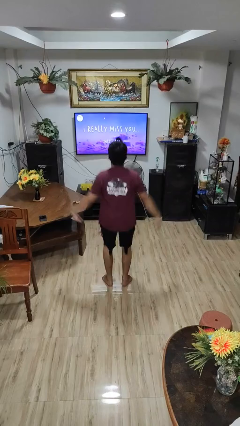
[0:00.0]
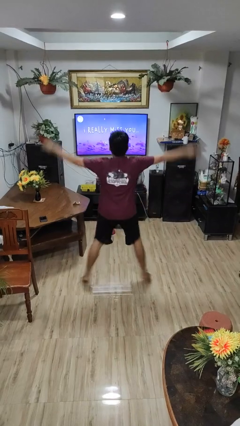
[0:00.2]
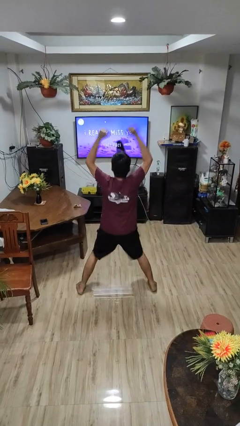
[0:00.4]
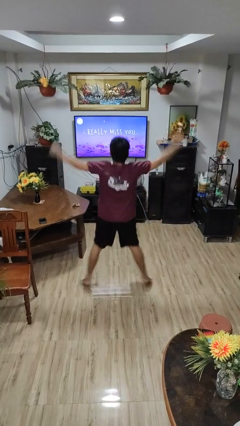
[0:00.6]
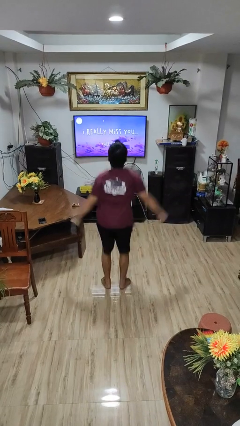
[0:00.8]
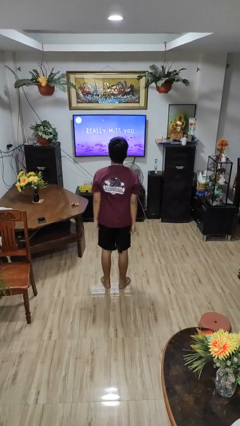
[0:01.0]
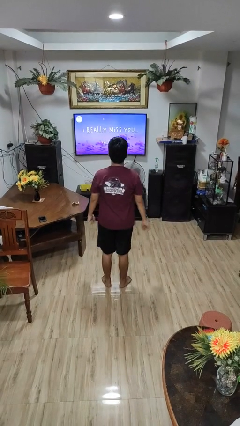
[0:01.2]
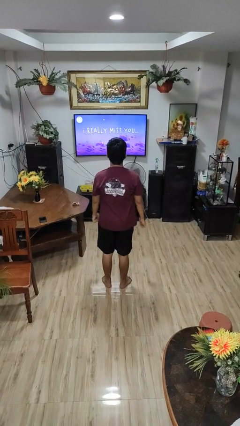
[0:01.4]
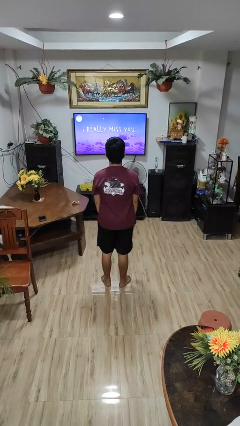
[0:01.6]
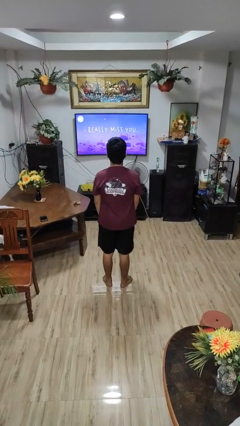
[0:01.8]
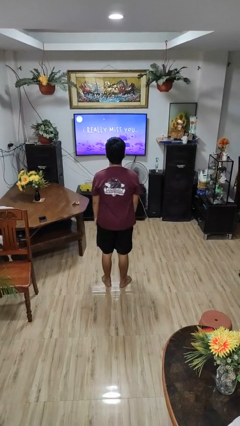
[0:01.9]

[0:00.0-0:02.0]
person exercises with jumping jacks

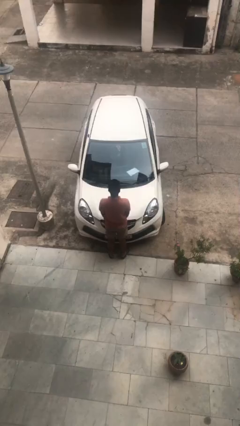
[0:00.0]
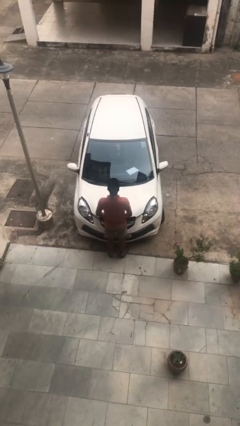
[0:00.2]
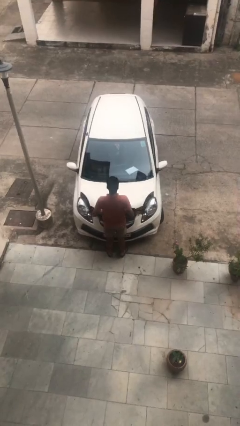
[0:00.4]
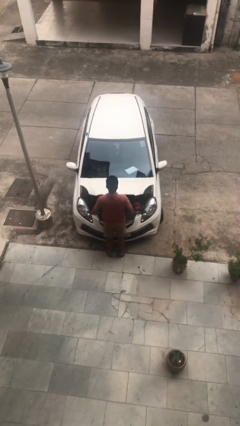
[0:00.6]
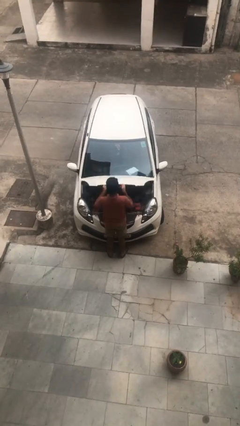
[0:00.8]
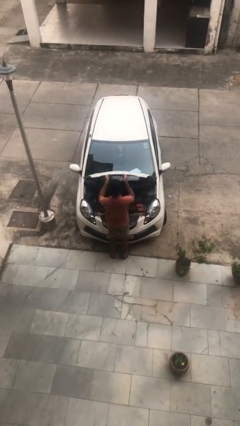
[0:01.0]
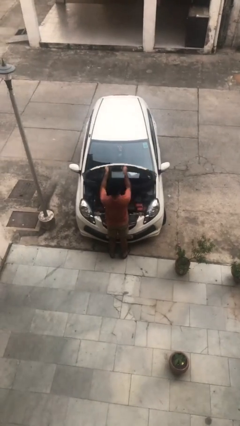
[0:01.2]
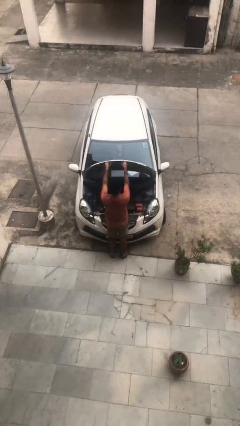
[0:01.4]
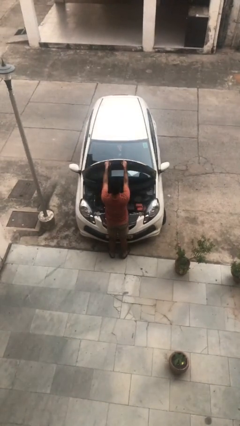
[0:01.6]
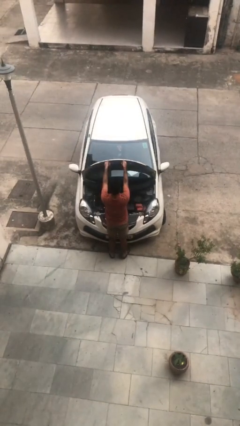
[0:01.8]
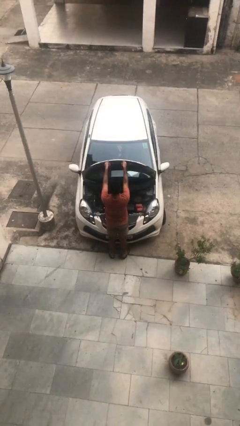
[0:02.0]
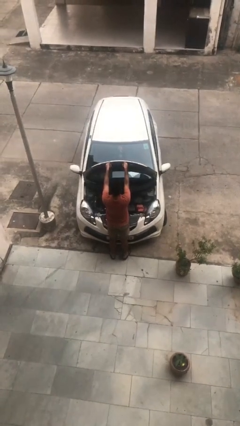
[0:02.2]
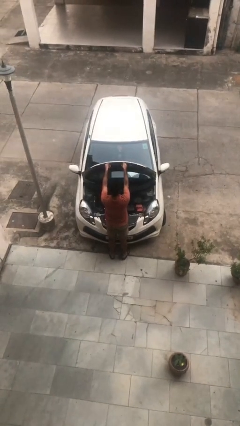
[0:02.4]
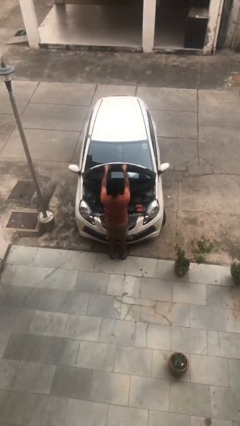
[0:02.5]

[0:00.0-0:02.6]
person opens car hood

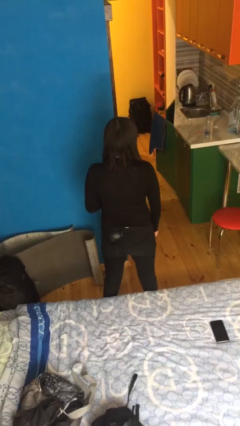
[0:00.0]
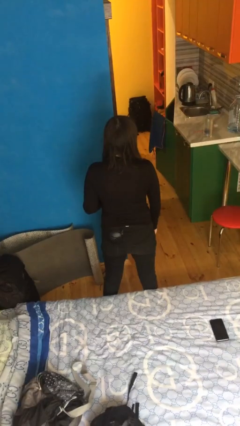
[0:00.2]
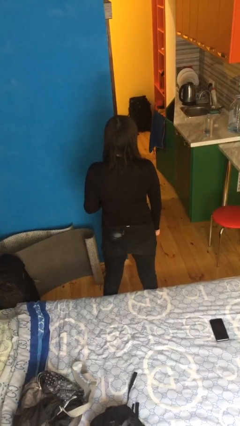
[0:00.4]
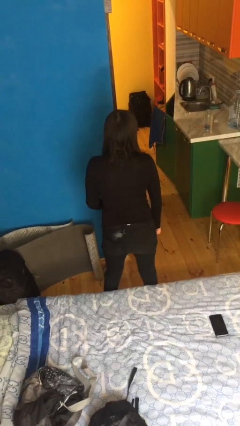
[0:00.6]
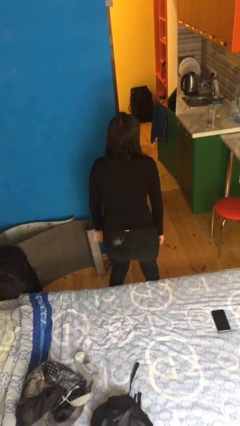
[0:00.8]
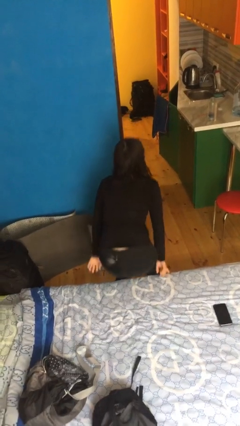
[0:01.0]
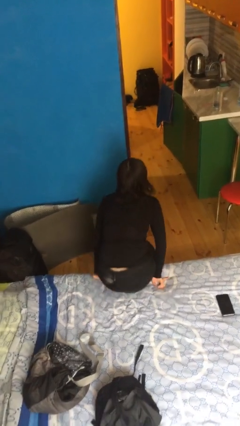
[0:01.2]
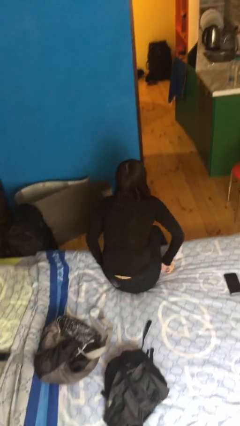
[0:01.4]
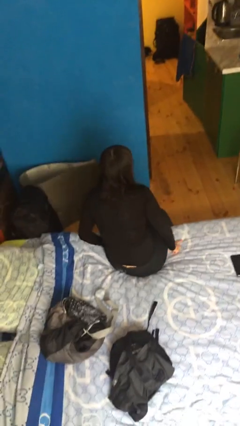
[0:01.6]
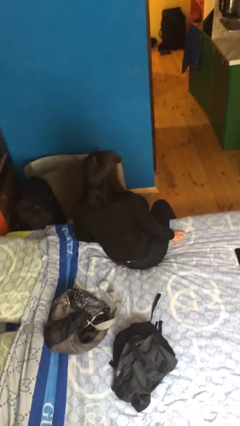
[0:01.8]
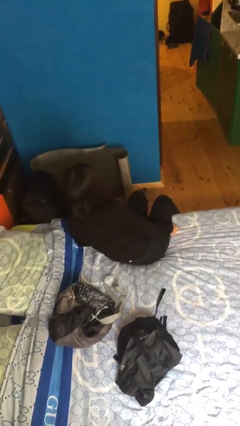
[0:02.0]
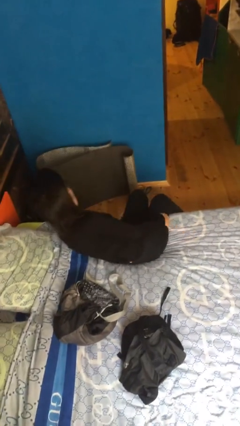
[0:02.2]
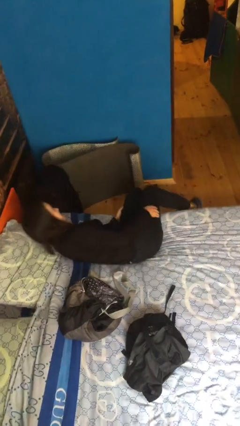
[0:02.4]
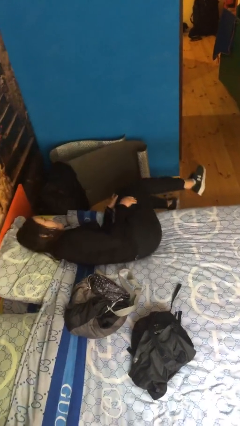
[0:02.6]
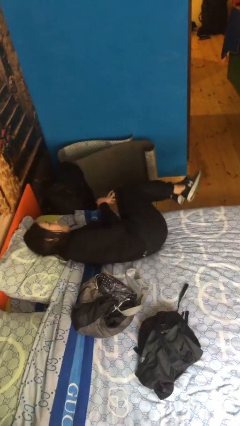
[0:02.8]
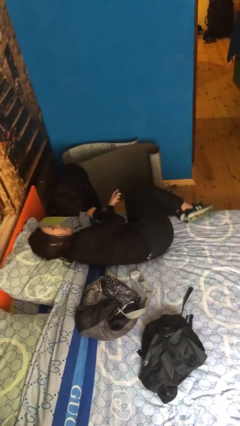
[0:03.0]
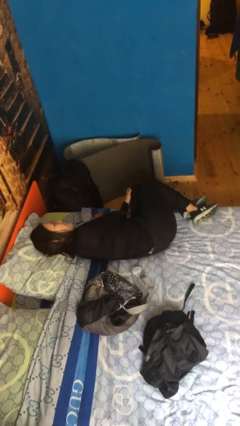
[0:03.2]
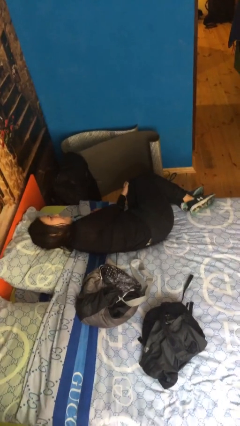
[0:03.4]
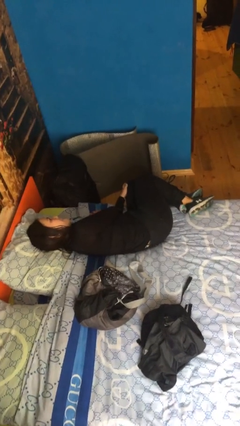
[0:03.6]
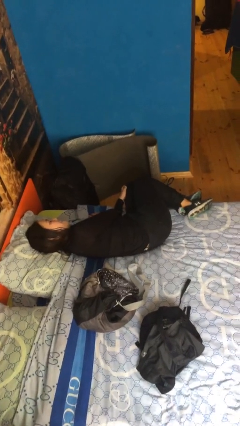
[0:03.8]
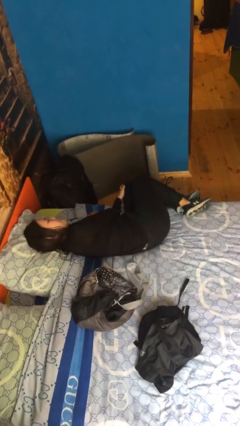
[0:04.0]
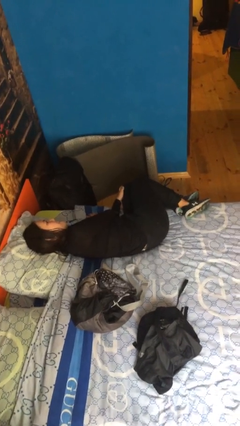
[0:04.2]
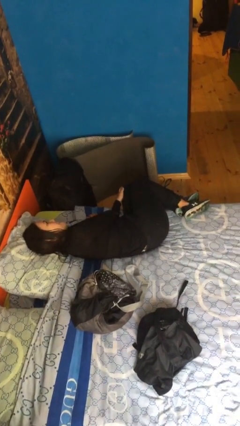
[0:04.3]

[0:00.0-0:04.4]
person lies down on bed

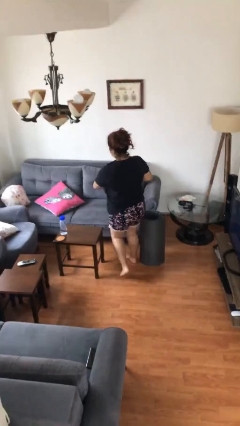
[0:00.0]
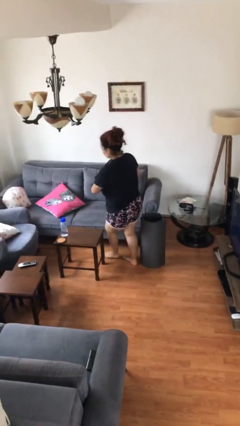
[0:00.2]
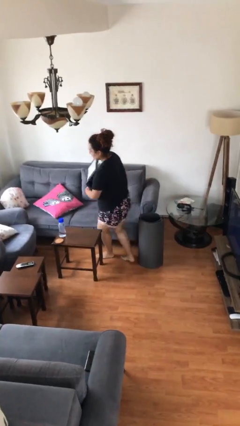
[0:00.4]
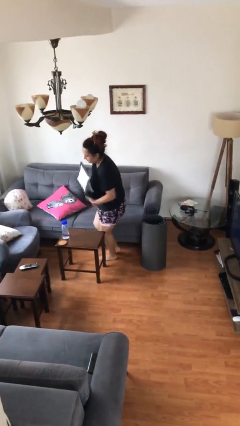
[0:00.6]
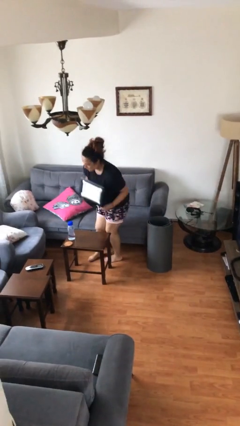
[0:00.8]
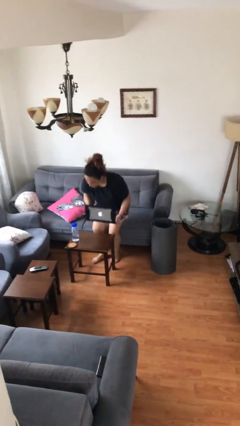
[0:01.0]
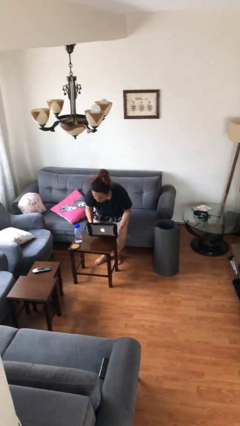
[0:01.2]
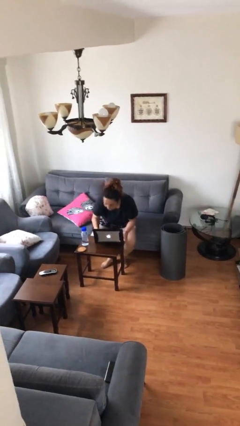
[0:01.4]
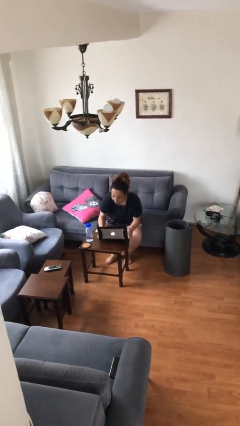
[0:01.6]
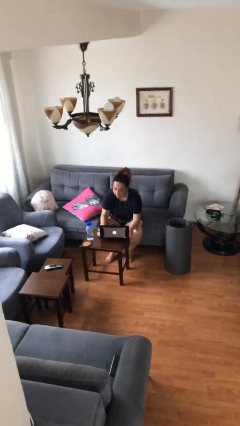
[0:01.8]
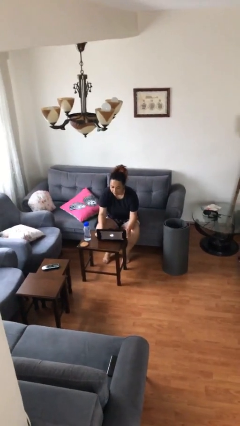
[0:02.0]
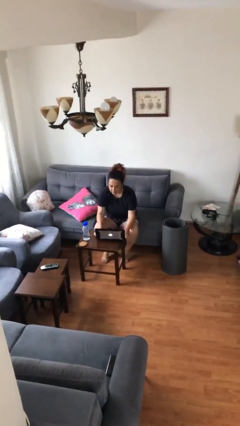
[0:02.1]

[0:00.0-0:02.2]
person sits down

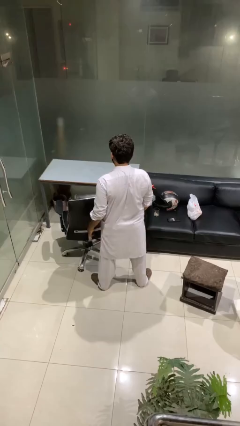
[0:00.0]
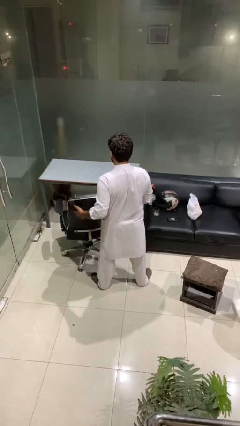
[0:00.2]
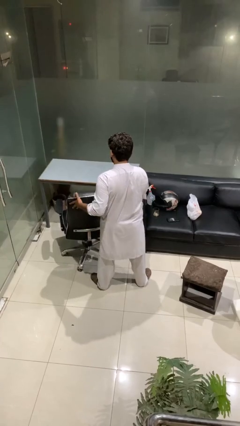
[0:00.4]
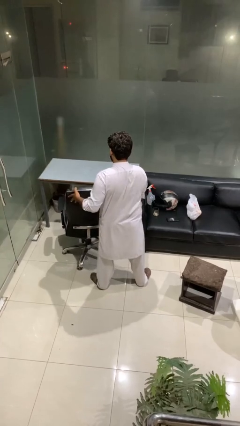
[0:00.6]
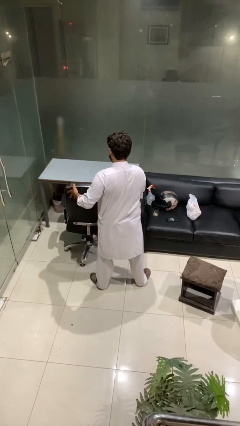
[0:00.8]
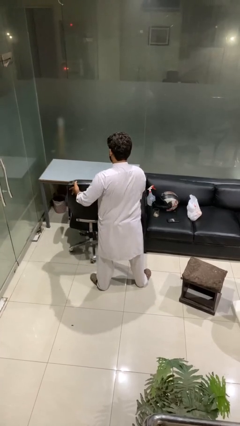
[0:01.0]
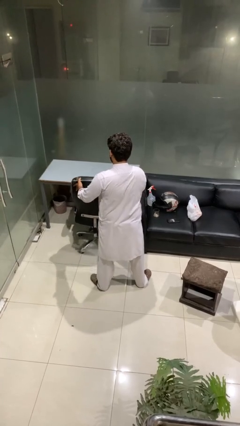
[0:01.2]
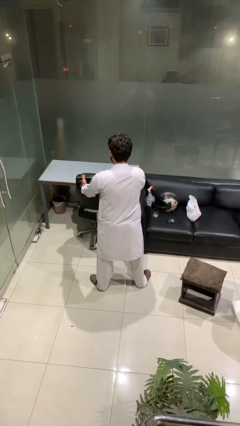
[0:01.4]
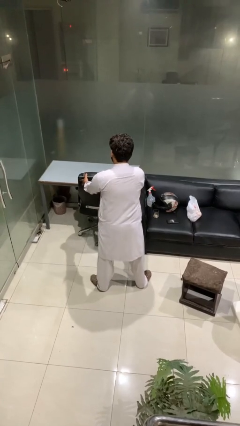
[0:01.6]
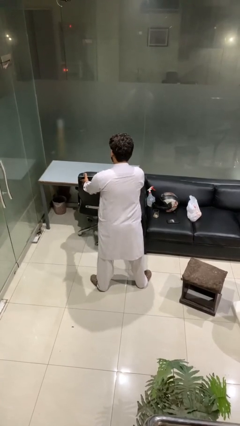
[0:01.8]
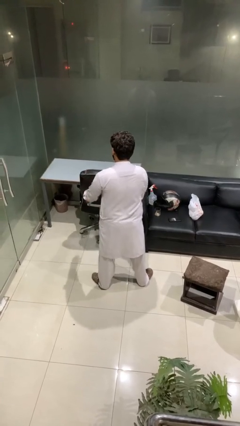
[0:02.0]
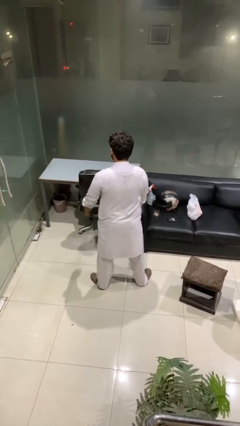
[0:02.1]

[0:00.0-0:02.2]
person pushes in chair

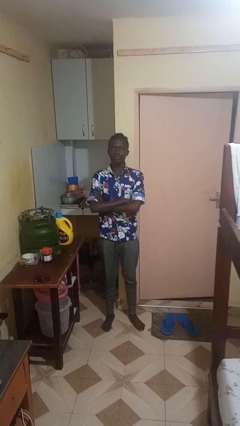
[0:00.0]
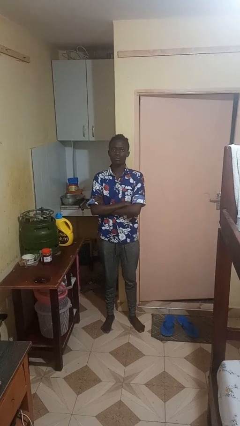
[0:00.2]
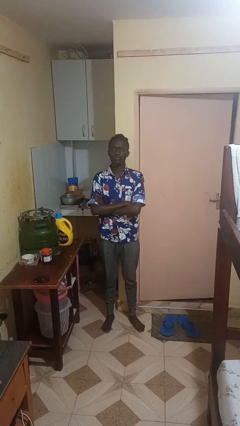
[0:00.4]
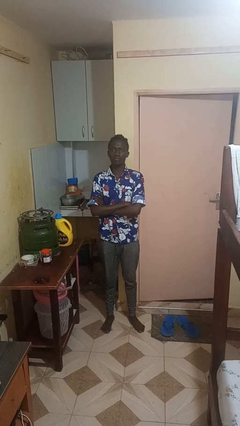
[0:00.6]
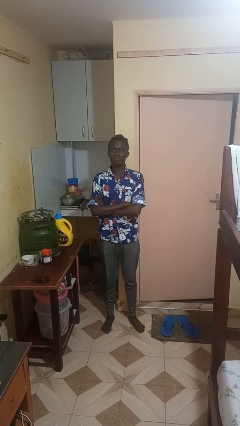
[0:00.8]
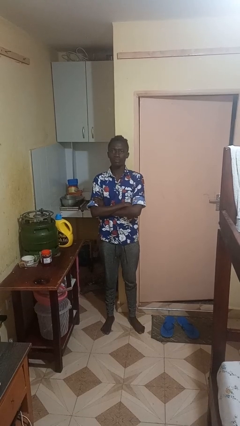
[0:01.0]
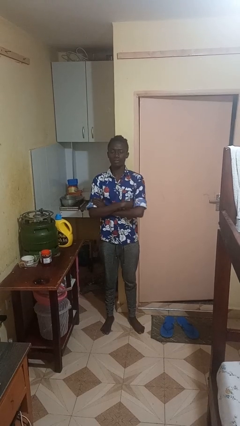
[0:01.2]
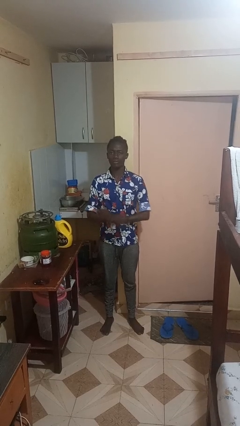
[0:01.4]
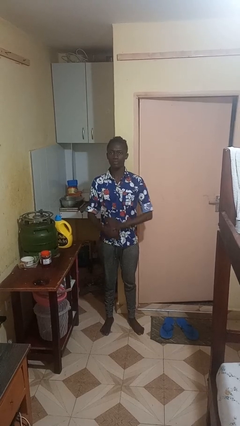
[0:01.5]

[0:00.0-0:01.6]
person crosses arms

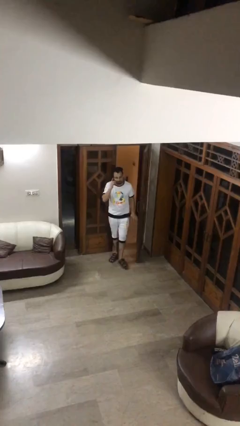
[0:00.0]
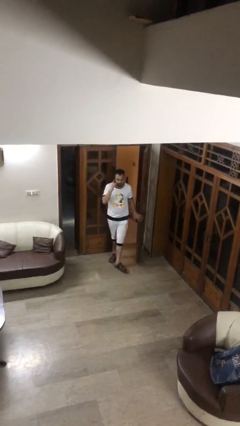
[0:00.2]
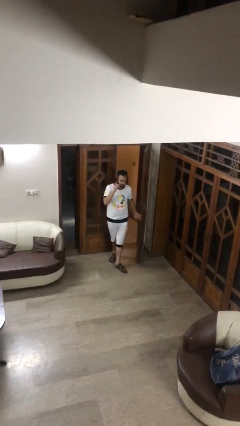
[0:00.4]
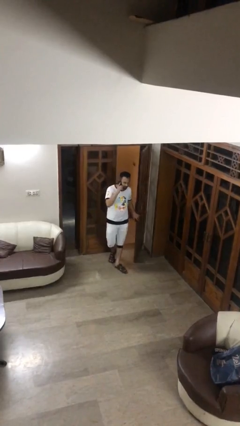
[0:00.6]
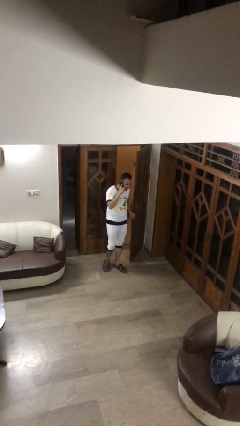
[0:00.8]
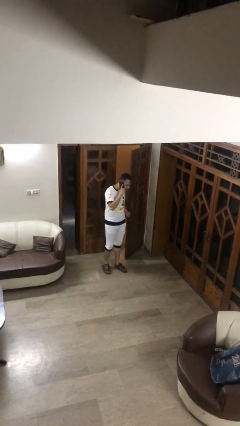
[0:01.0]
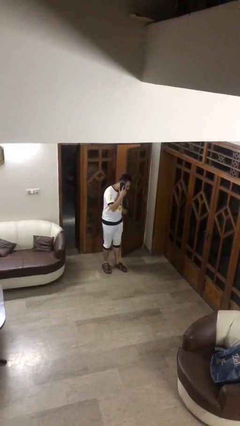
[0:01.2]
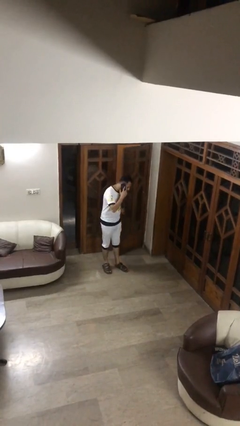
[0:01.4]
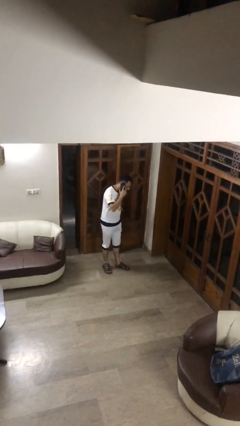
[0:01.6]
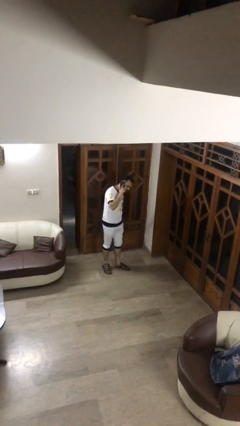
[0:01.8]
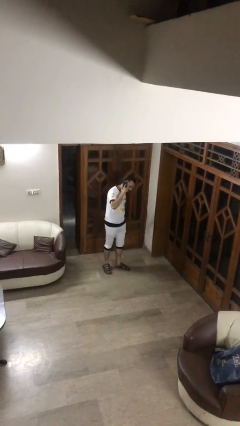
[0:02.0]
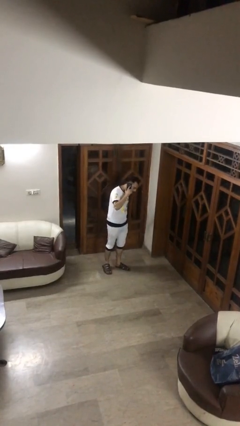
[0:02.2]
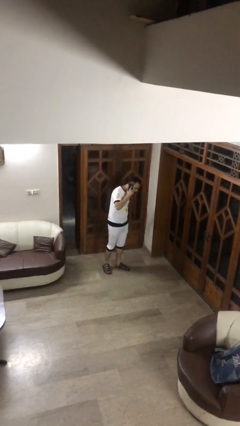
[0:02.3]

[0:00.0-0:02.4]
person closes facility door
